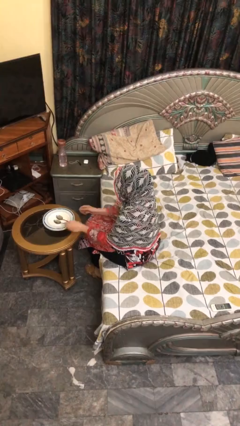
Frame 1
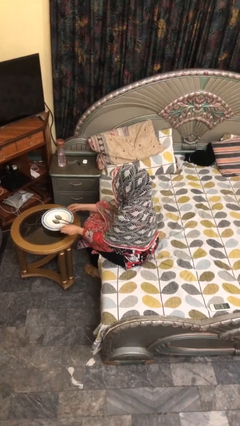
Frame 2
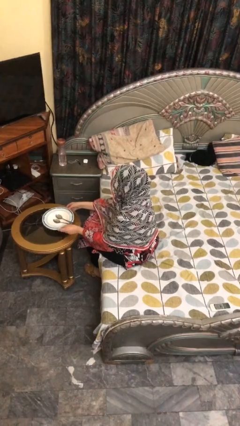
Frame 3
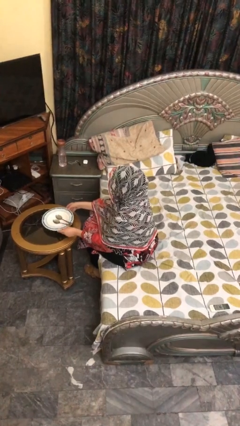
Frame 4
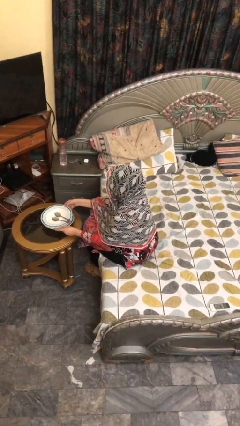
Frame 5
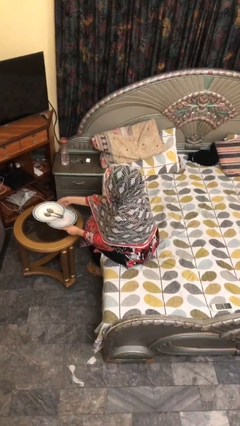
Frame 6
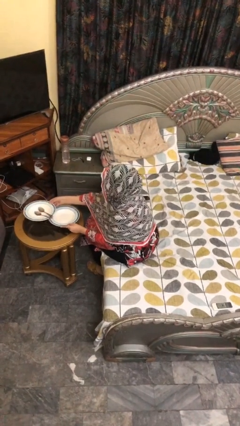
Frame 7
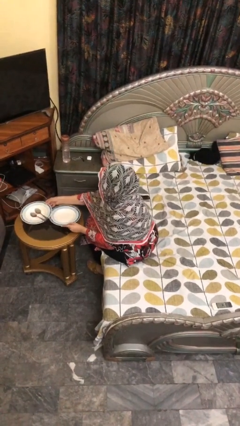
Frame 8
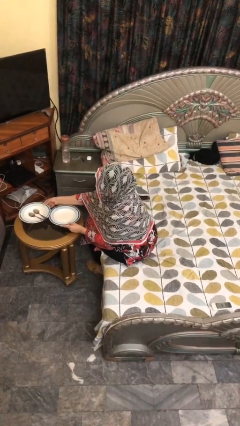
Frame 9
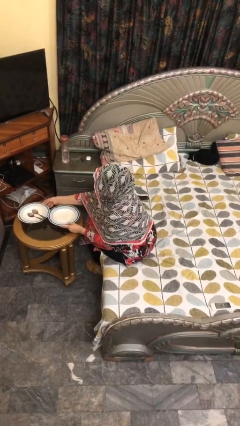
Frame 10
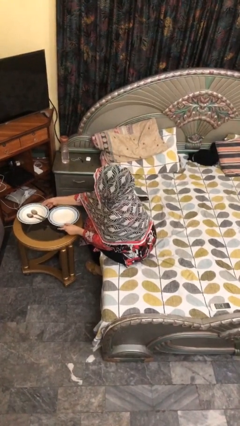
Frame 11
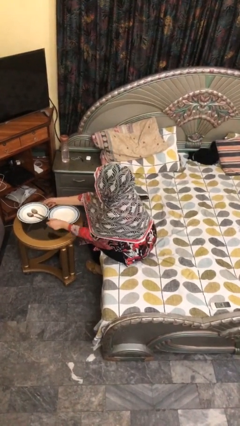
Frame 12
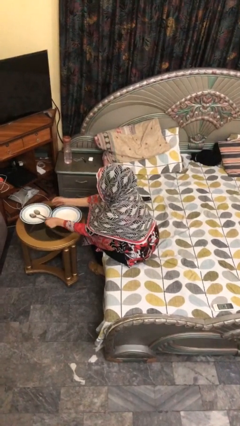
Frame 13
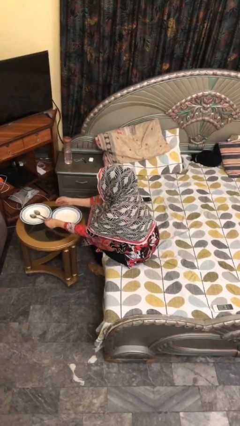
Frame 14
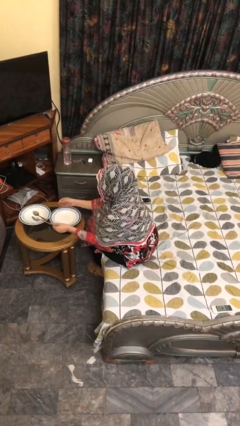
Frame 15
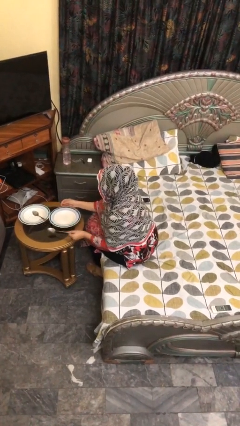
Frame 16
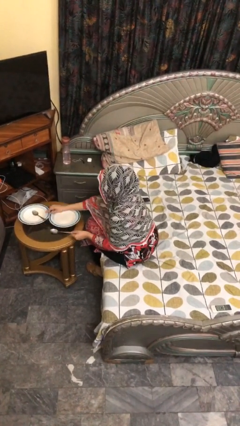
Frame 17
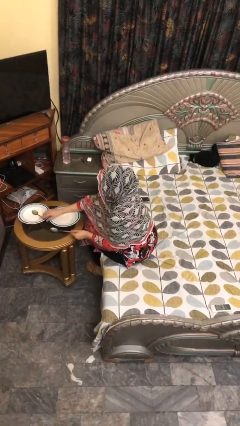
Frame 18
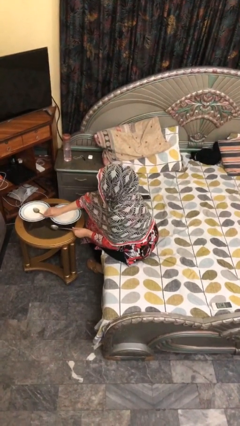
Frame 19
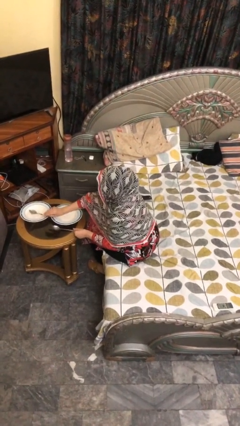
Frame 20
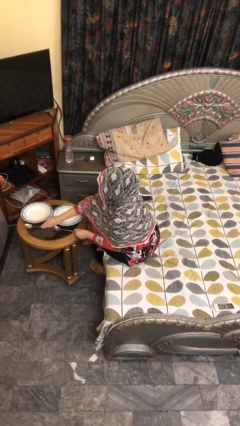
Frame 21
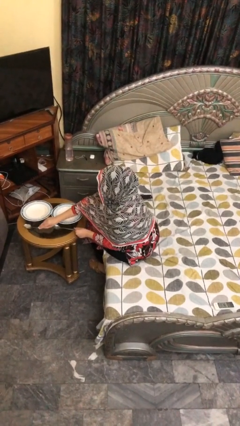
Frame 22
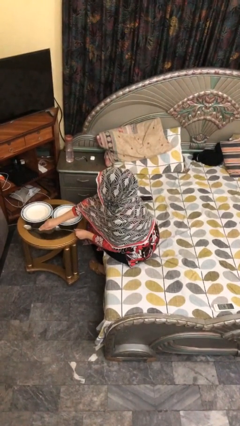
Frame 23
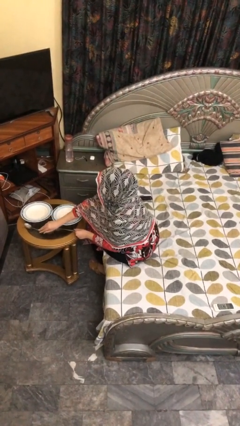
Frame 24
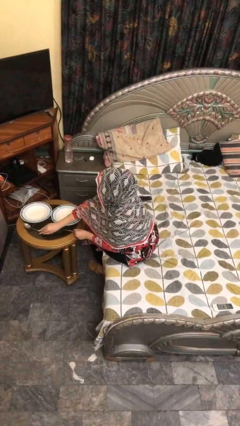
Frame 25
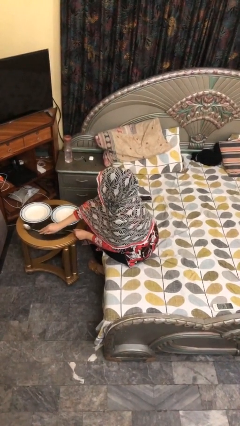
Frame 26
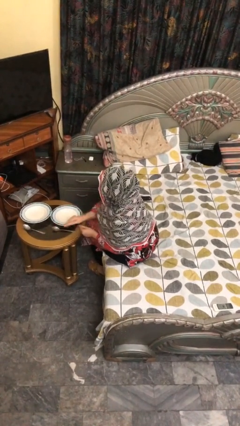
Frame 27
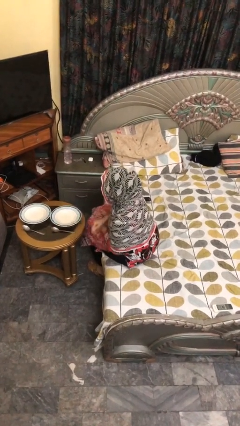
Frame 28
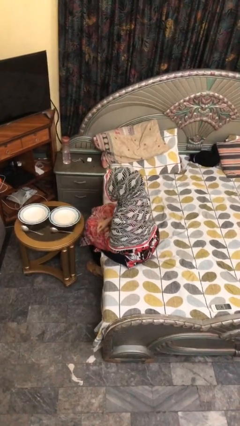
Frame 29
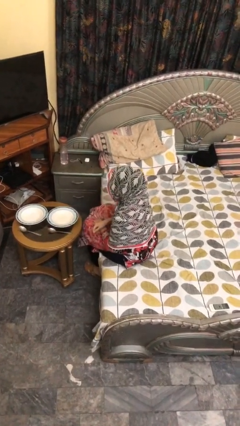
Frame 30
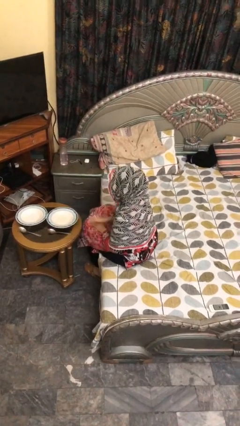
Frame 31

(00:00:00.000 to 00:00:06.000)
person sets table

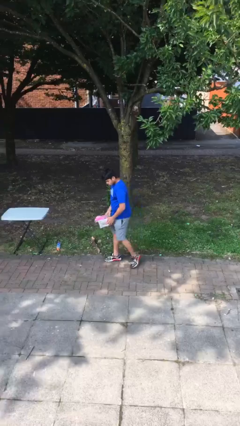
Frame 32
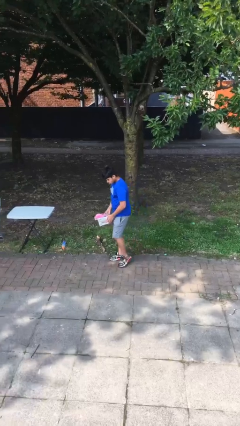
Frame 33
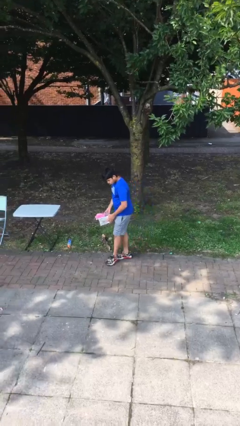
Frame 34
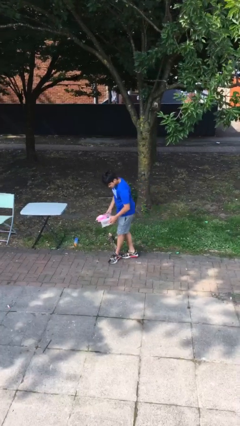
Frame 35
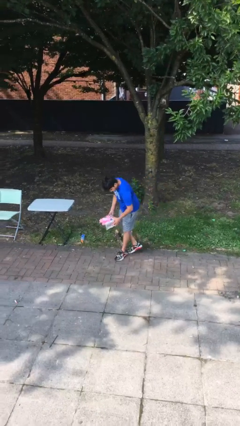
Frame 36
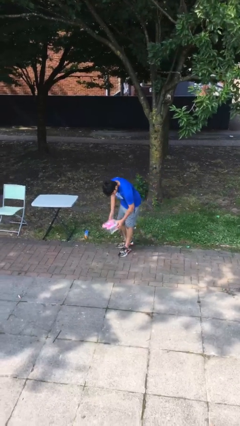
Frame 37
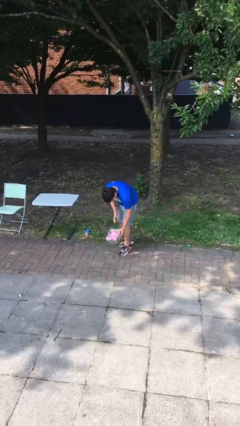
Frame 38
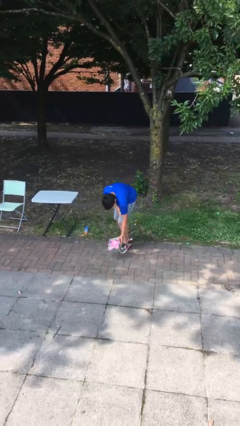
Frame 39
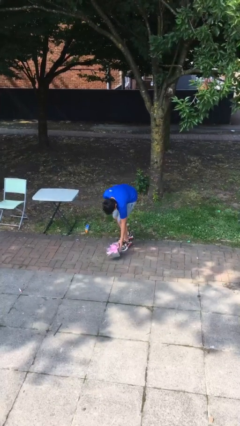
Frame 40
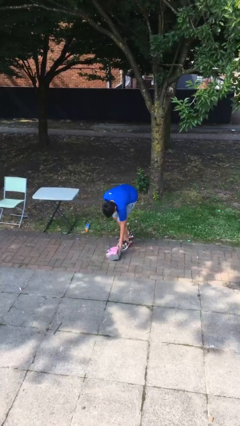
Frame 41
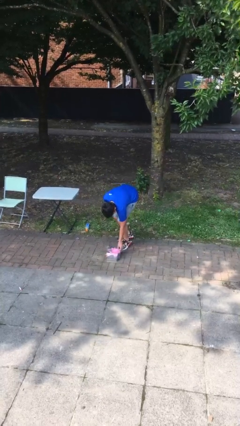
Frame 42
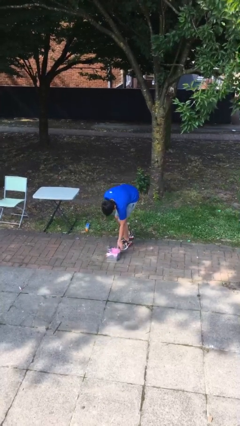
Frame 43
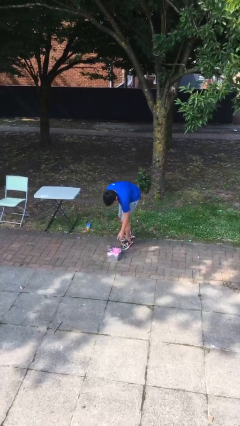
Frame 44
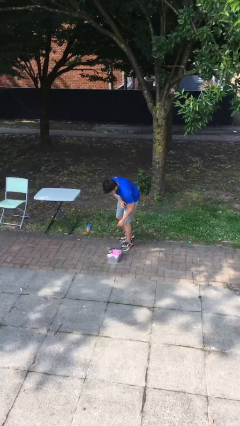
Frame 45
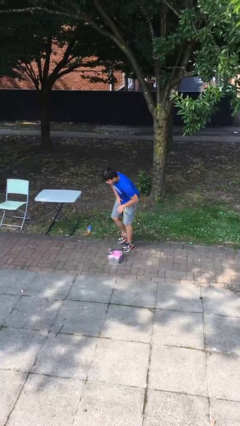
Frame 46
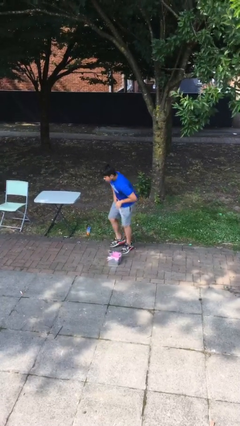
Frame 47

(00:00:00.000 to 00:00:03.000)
person puts down object on floor

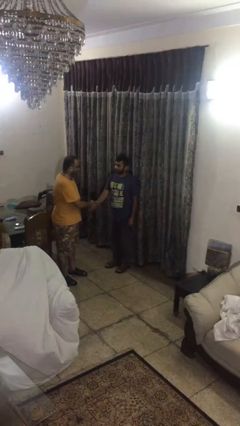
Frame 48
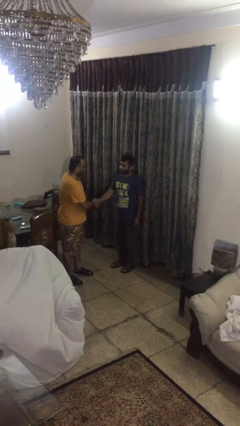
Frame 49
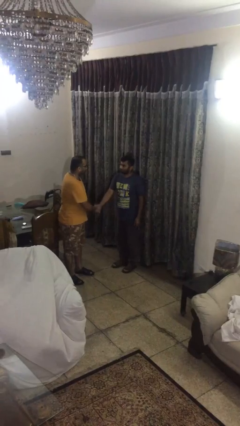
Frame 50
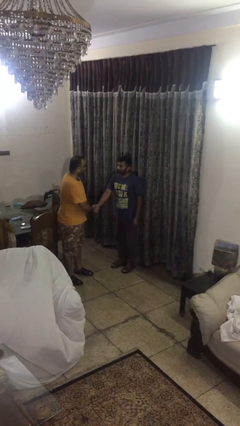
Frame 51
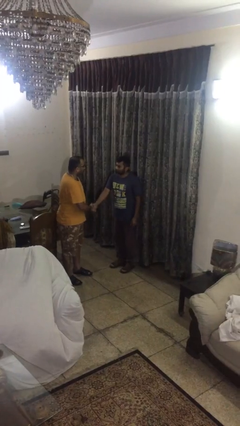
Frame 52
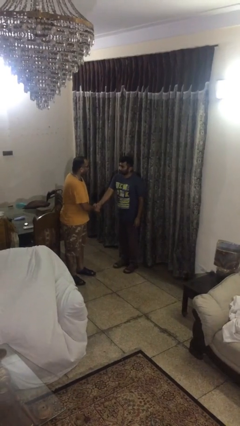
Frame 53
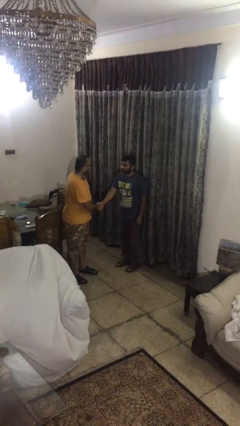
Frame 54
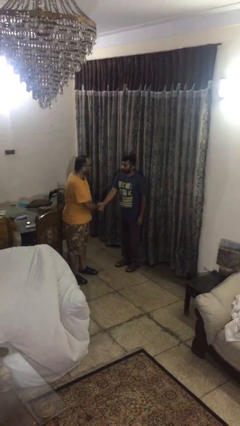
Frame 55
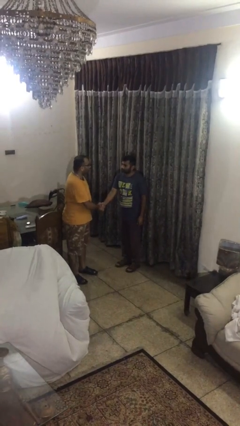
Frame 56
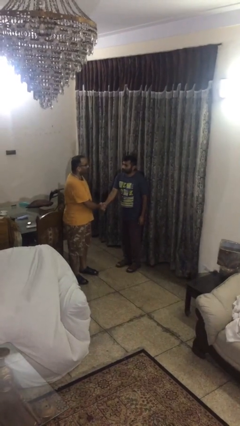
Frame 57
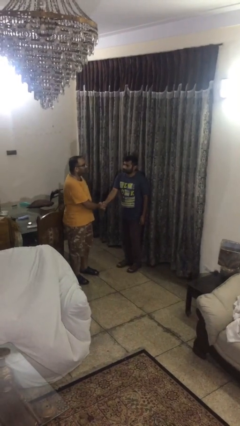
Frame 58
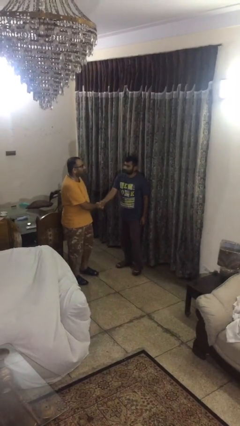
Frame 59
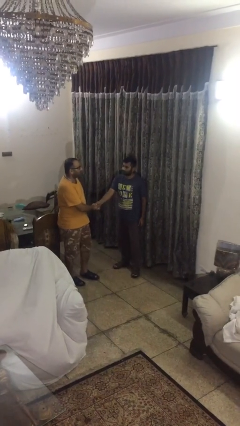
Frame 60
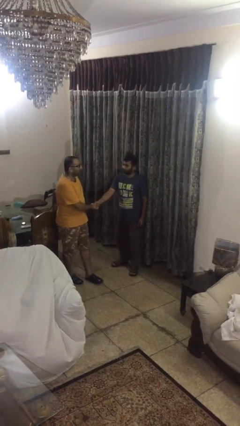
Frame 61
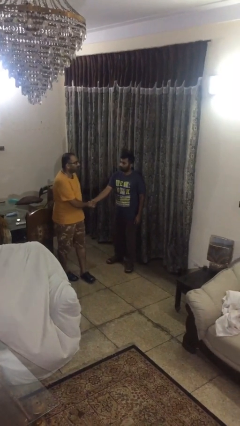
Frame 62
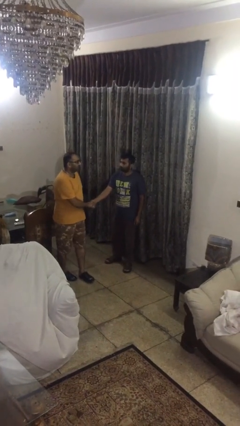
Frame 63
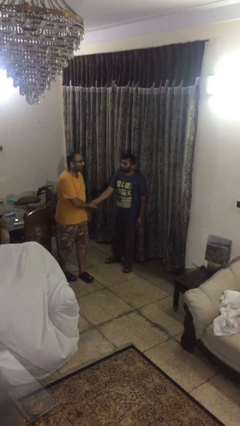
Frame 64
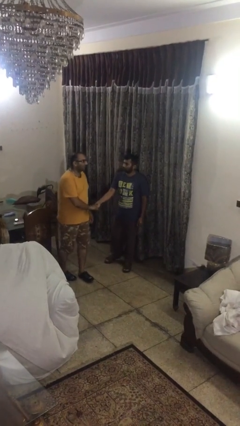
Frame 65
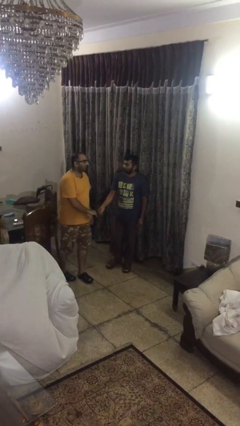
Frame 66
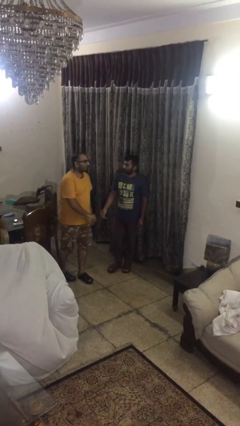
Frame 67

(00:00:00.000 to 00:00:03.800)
person shakes hand

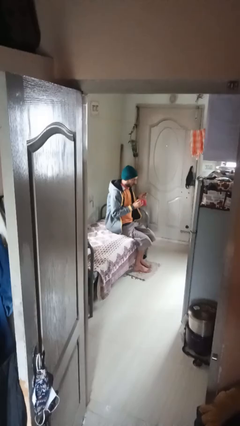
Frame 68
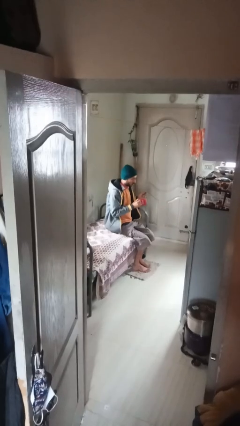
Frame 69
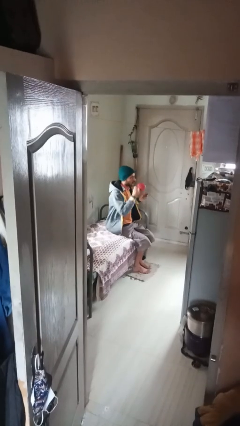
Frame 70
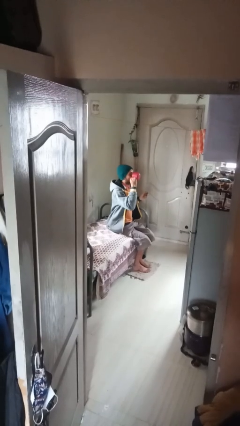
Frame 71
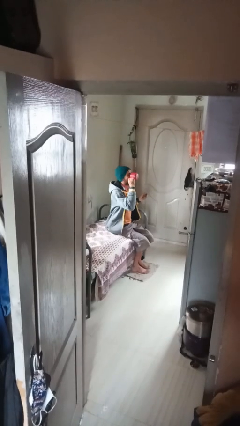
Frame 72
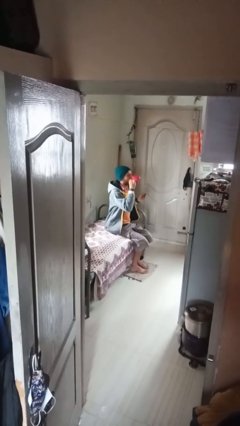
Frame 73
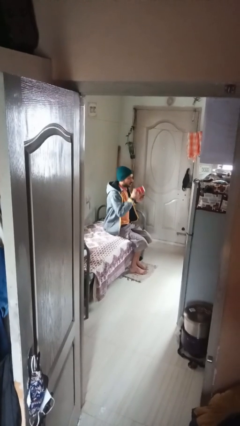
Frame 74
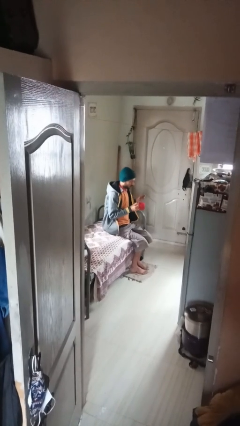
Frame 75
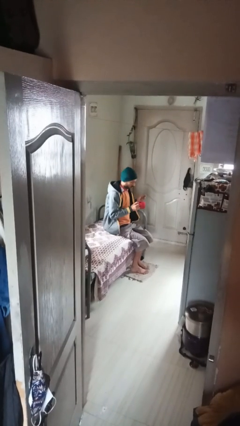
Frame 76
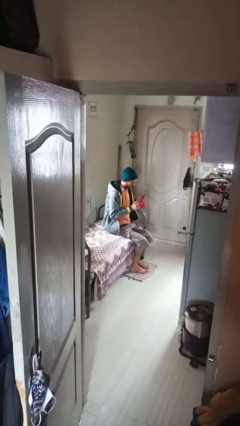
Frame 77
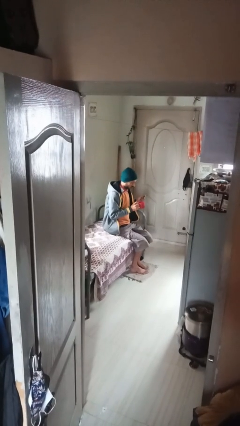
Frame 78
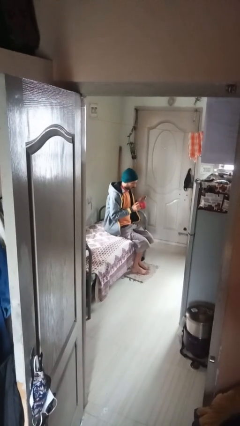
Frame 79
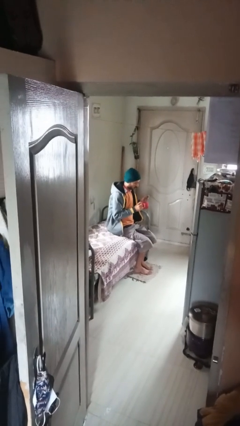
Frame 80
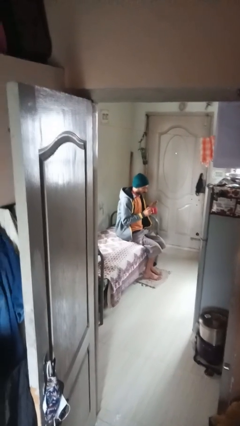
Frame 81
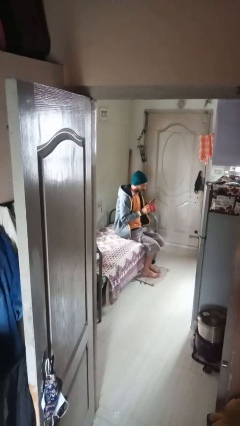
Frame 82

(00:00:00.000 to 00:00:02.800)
person drinks from mug

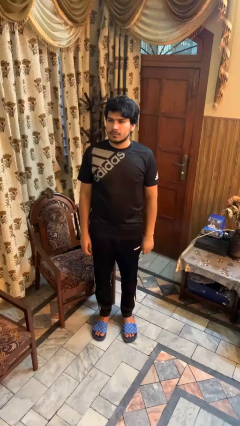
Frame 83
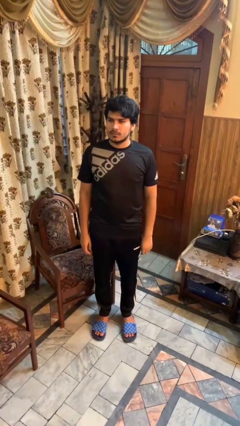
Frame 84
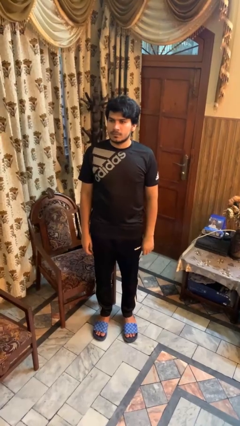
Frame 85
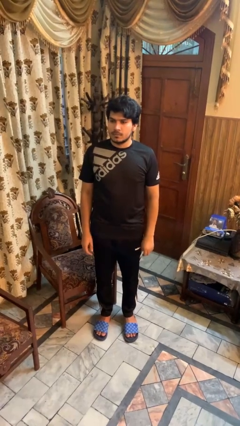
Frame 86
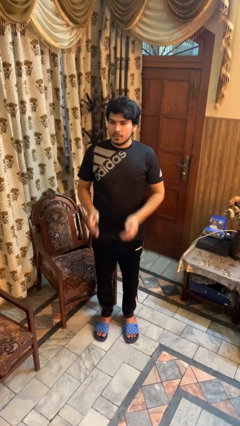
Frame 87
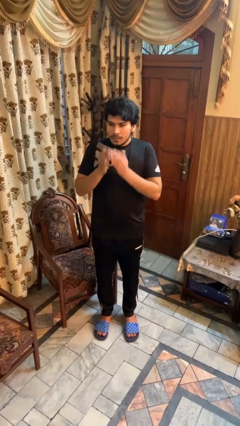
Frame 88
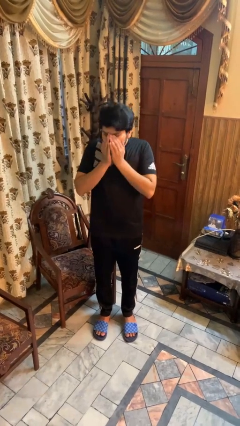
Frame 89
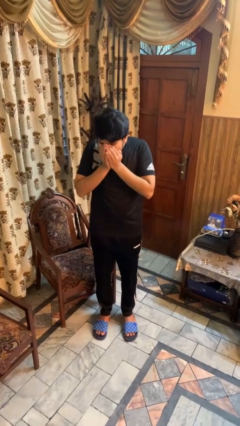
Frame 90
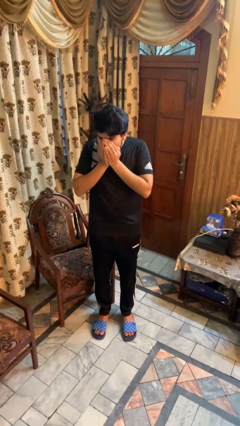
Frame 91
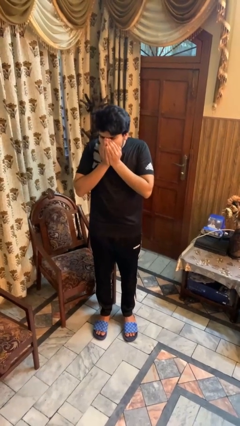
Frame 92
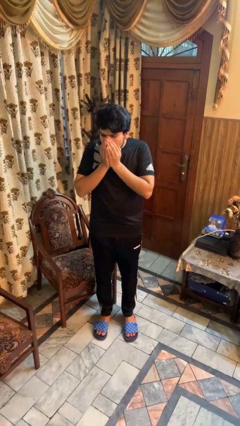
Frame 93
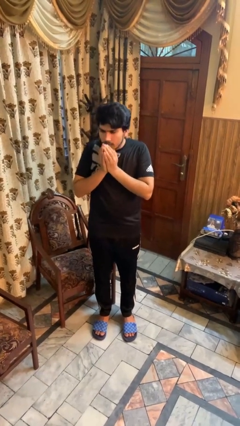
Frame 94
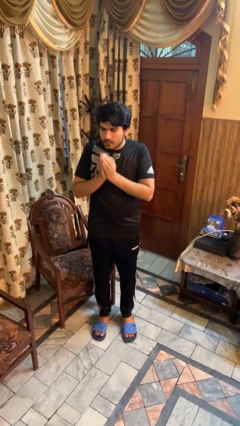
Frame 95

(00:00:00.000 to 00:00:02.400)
person sneezes into hand
